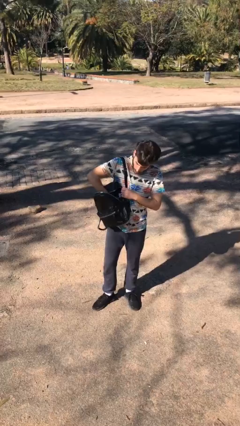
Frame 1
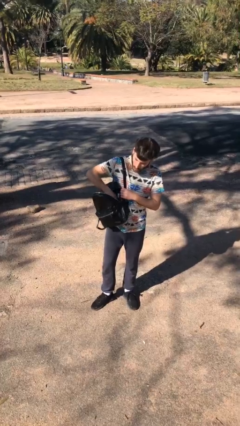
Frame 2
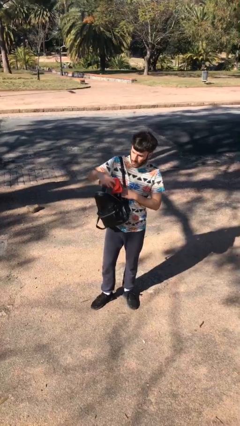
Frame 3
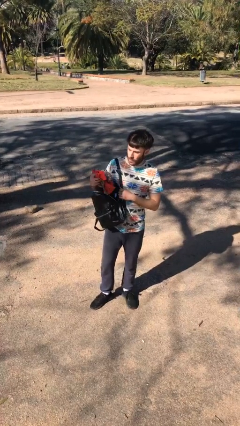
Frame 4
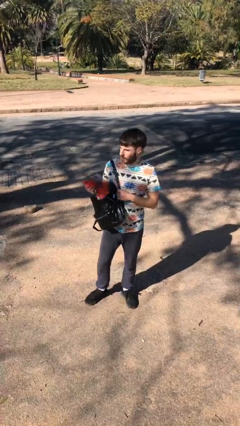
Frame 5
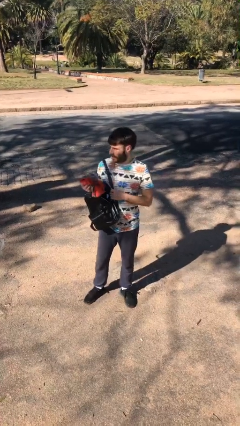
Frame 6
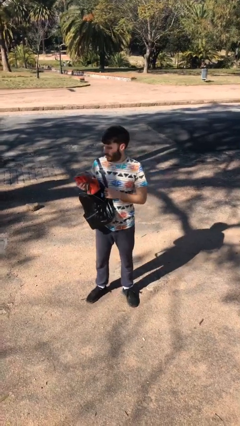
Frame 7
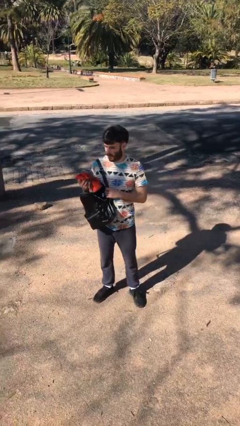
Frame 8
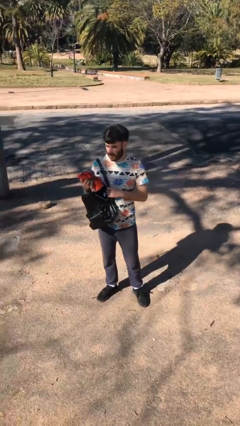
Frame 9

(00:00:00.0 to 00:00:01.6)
person takes object from backpack

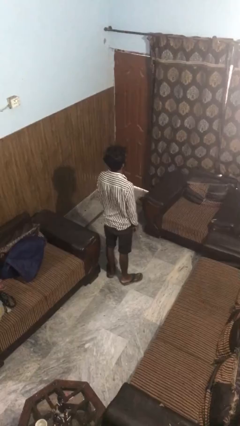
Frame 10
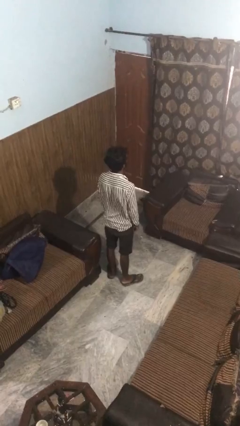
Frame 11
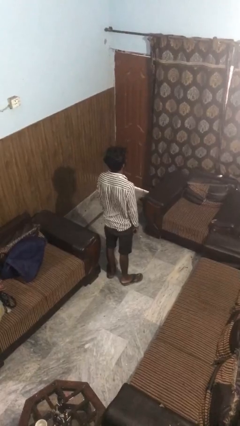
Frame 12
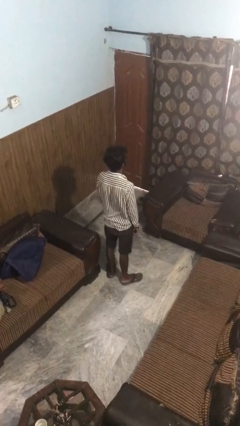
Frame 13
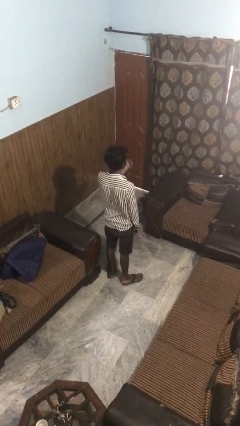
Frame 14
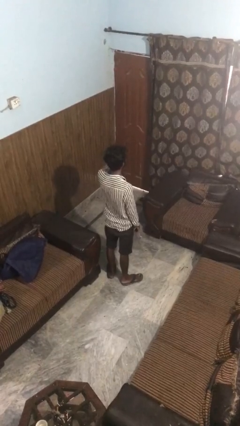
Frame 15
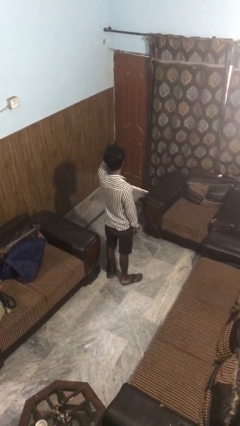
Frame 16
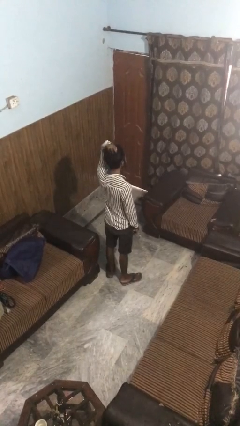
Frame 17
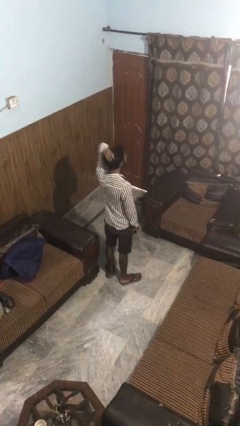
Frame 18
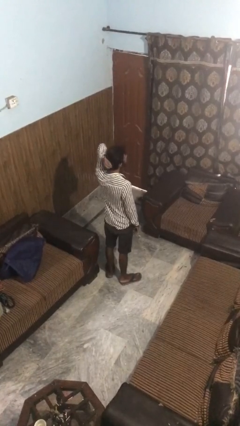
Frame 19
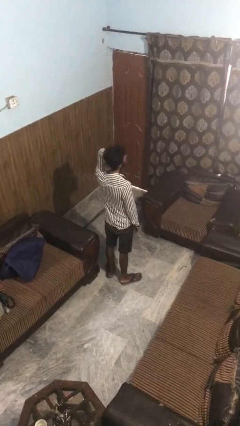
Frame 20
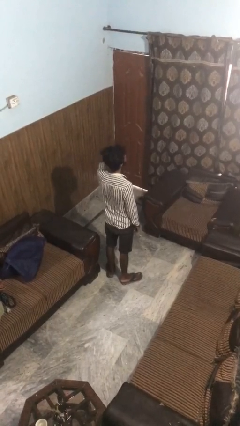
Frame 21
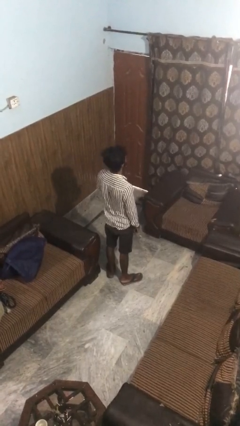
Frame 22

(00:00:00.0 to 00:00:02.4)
person strokes hair

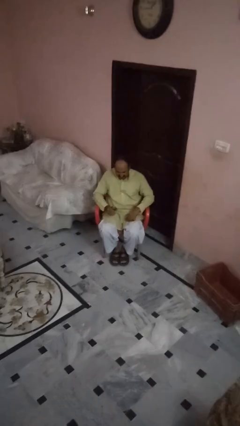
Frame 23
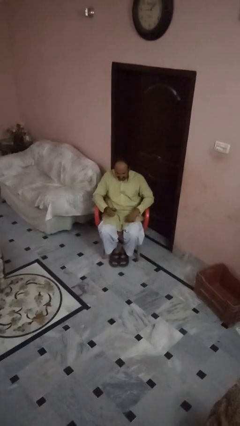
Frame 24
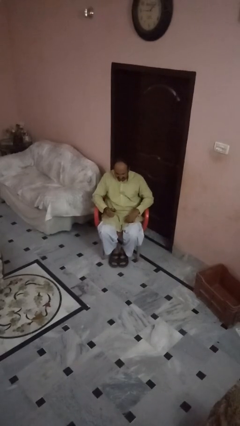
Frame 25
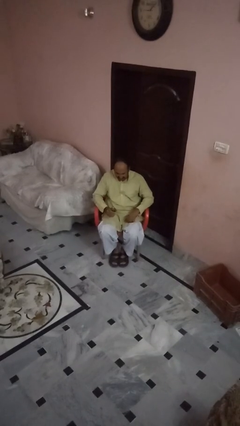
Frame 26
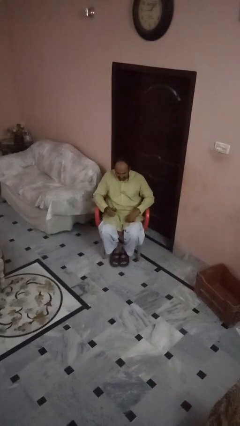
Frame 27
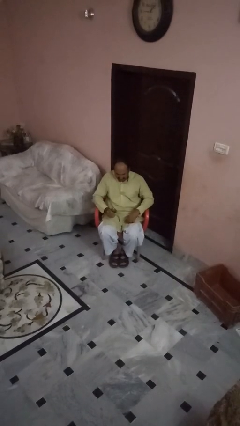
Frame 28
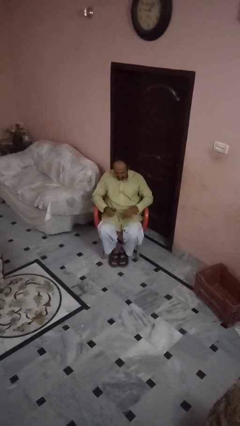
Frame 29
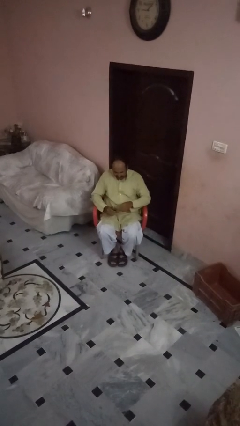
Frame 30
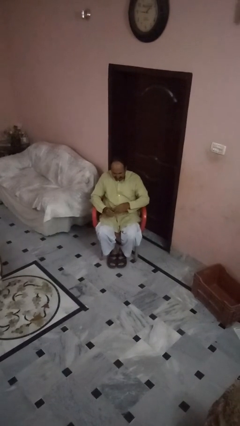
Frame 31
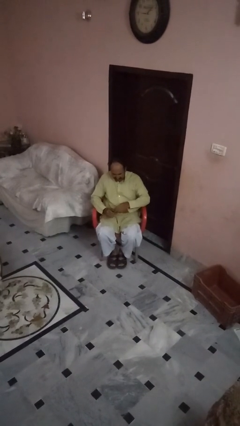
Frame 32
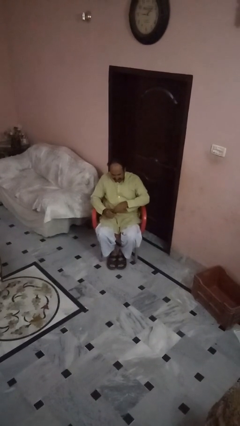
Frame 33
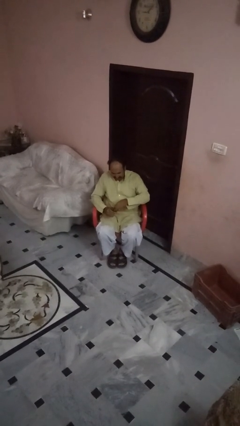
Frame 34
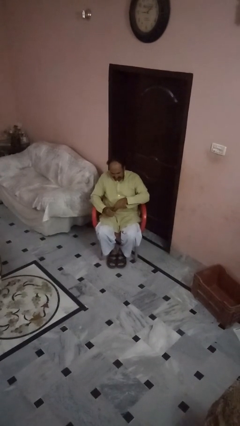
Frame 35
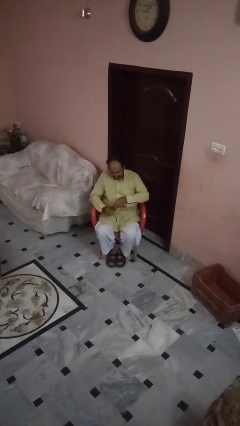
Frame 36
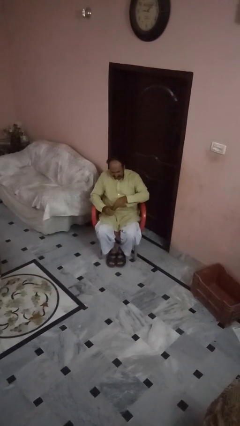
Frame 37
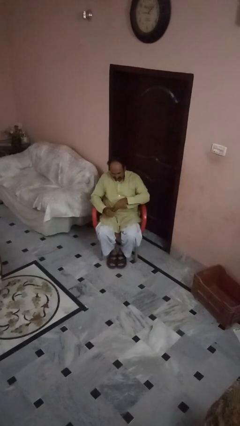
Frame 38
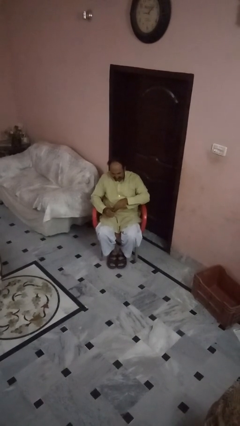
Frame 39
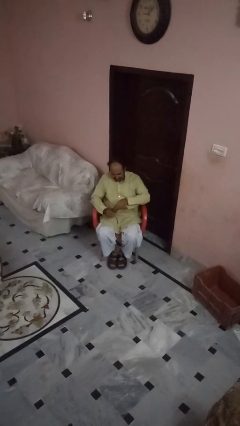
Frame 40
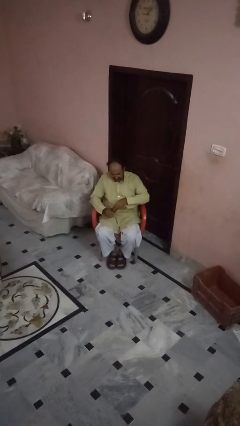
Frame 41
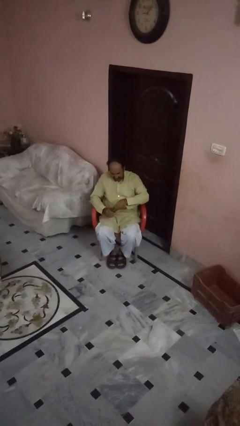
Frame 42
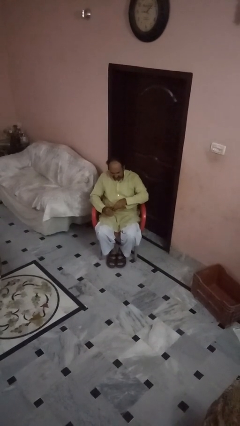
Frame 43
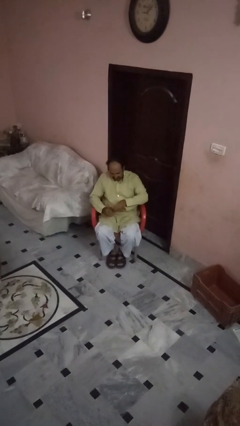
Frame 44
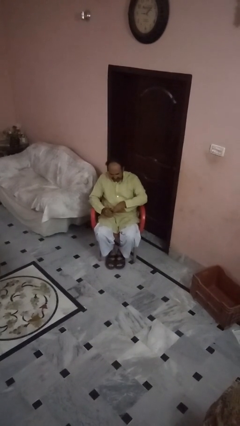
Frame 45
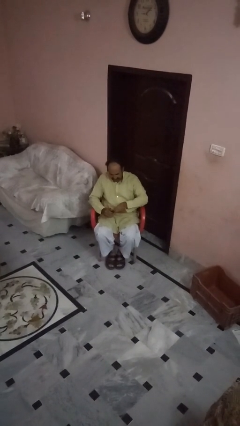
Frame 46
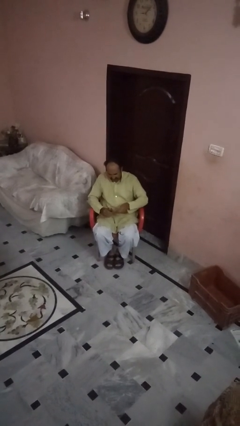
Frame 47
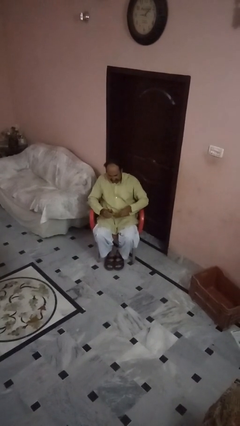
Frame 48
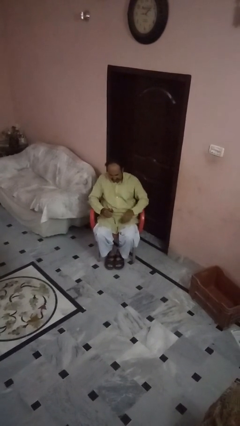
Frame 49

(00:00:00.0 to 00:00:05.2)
person opens beverage can

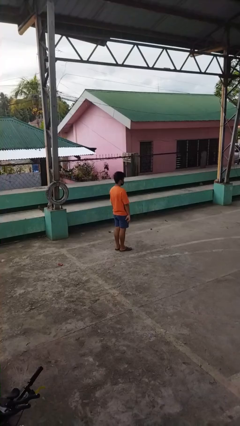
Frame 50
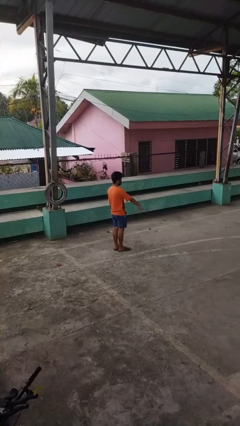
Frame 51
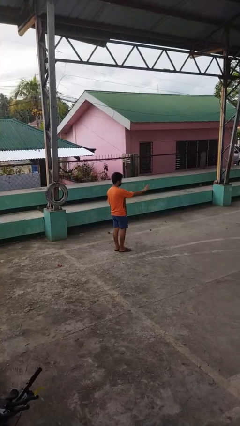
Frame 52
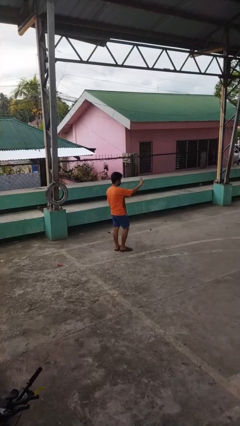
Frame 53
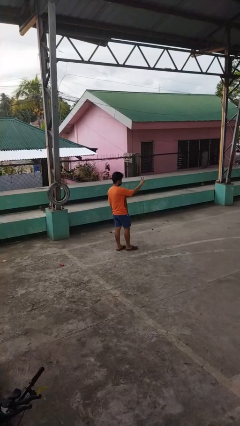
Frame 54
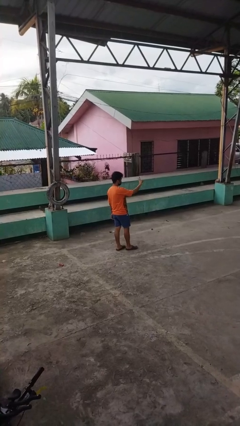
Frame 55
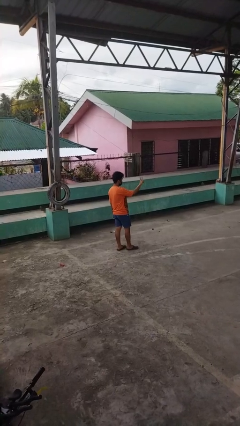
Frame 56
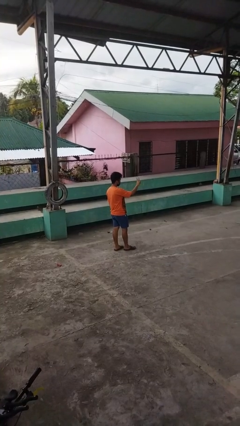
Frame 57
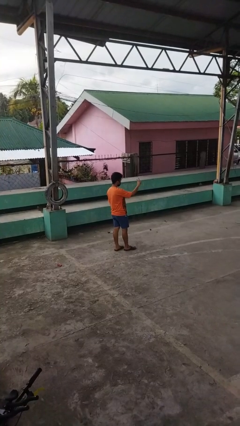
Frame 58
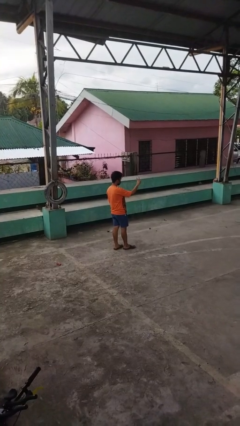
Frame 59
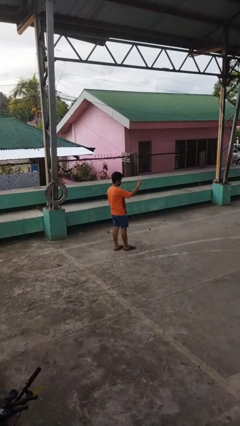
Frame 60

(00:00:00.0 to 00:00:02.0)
person gestures peace

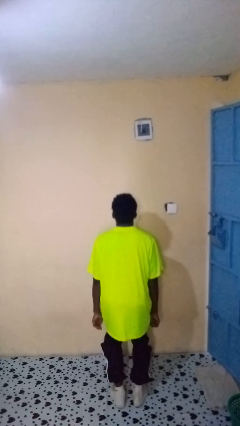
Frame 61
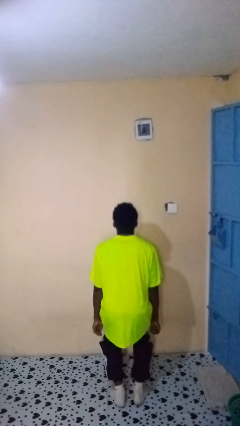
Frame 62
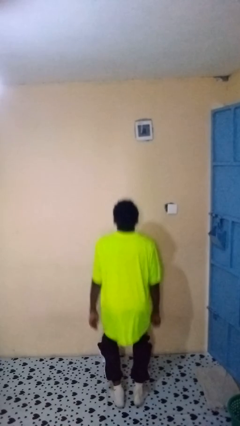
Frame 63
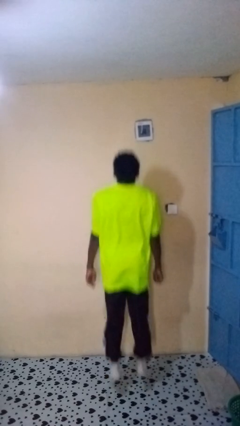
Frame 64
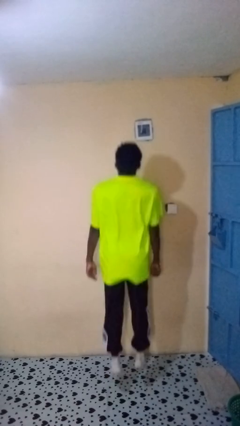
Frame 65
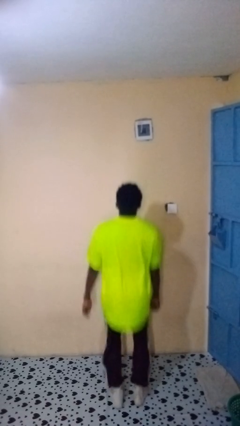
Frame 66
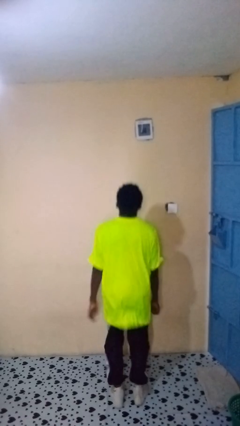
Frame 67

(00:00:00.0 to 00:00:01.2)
person jumps

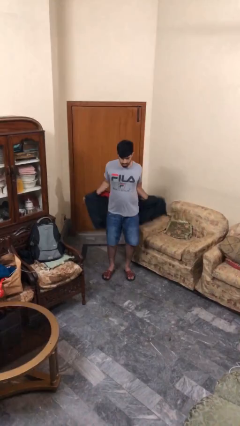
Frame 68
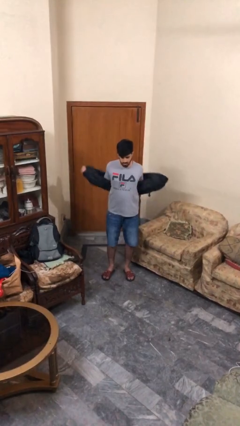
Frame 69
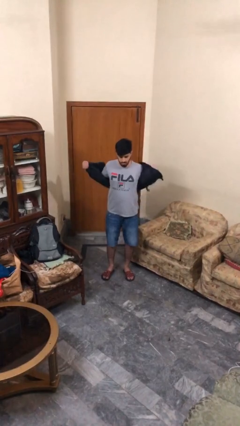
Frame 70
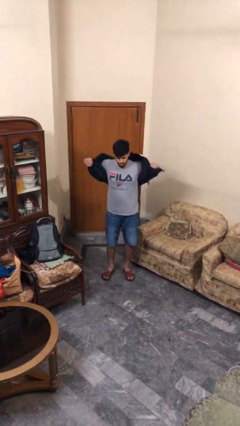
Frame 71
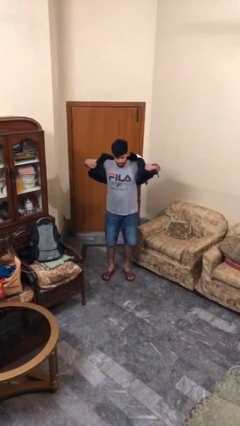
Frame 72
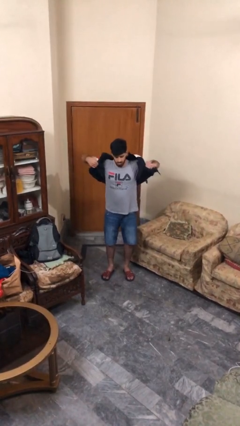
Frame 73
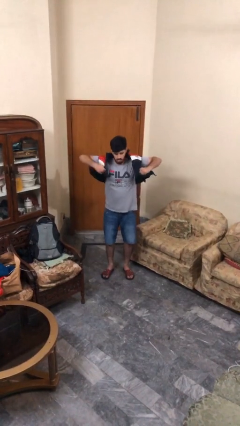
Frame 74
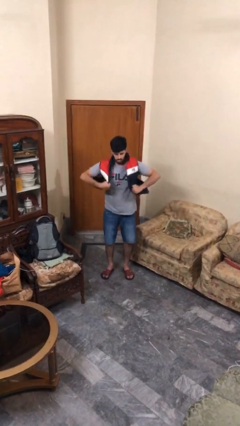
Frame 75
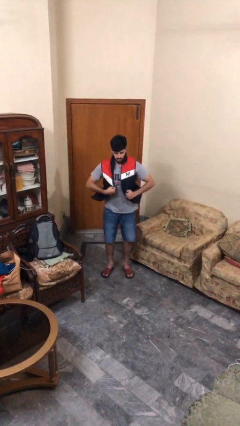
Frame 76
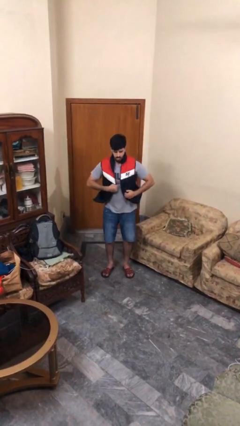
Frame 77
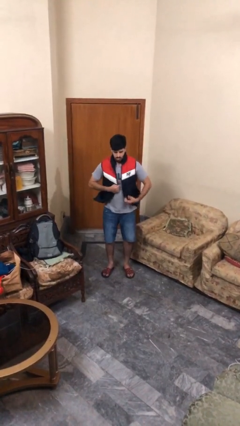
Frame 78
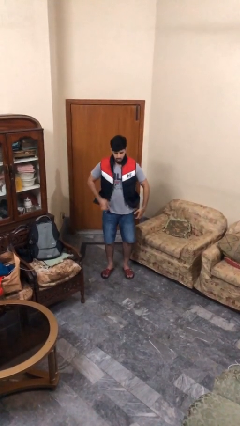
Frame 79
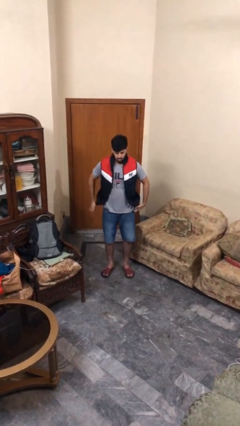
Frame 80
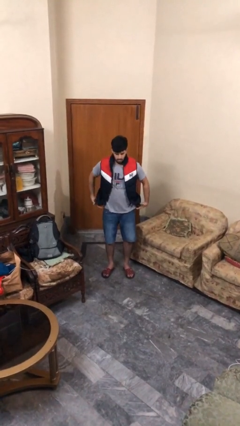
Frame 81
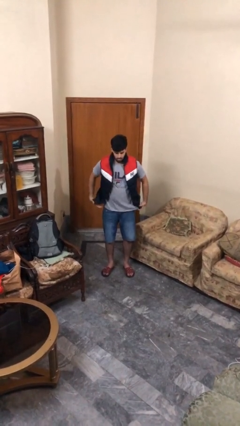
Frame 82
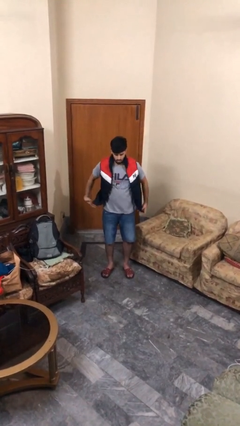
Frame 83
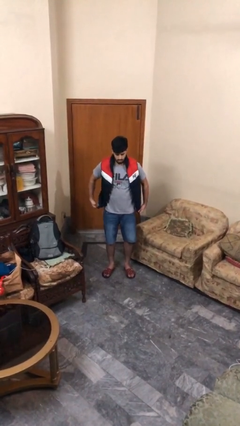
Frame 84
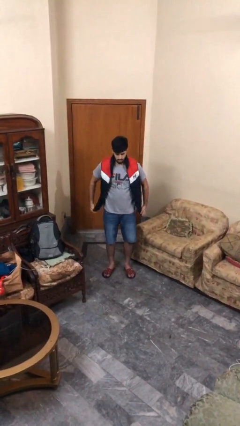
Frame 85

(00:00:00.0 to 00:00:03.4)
person puts on jacket

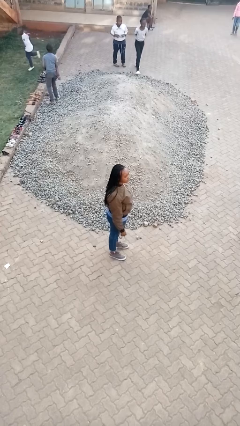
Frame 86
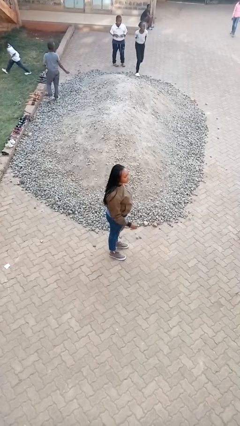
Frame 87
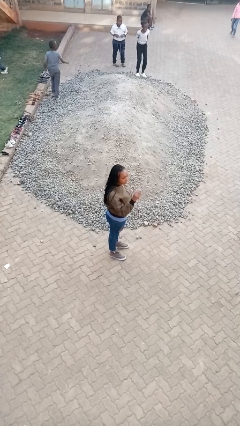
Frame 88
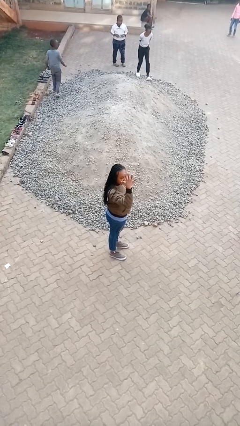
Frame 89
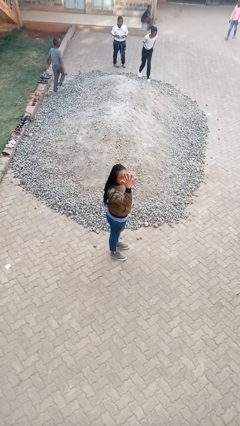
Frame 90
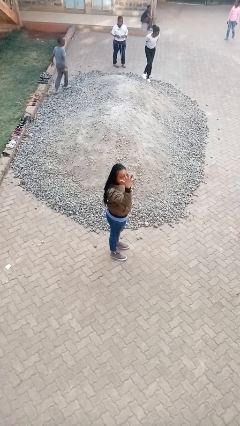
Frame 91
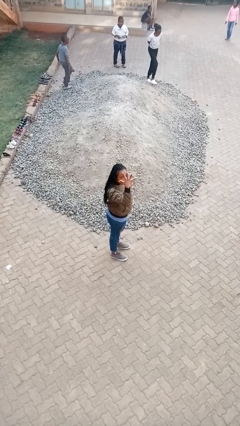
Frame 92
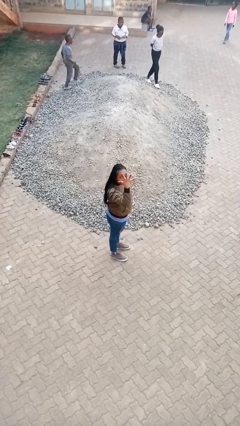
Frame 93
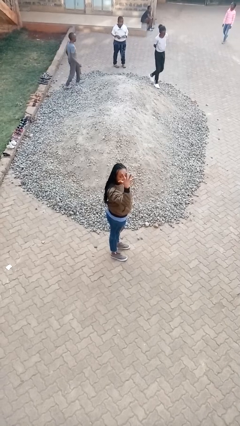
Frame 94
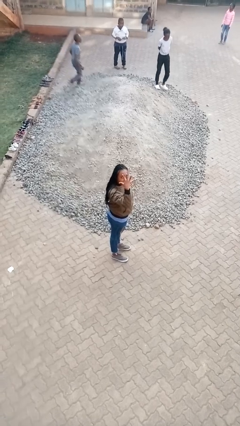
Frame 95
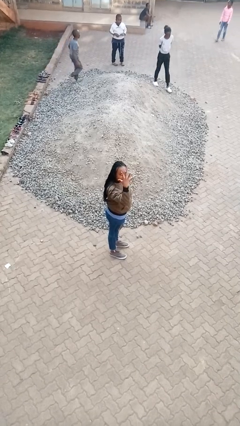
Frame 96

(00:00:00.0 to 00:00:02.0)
person gestures number five
